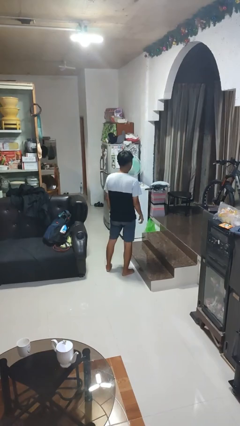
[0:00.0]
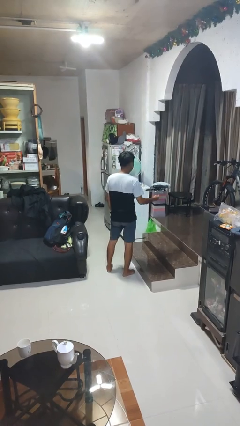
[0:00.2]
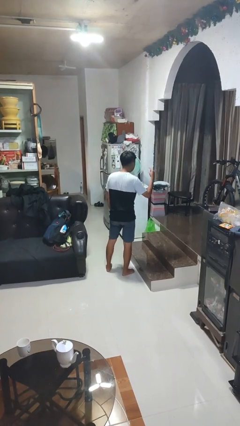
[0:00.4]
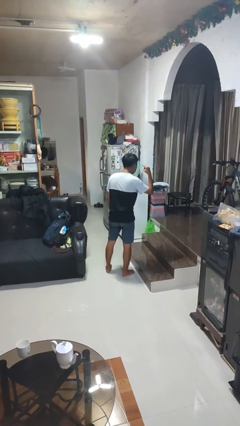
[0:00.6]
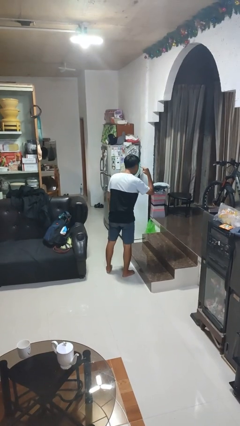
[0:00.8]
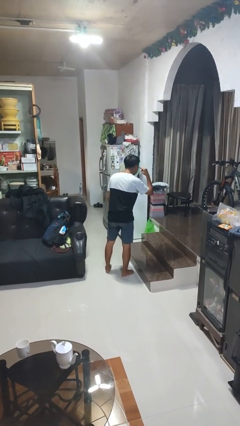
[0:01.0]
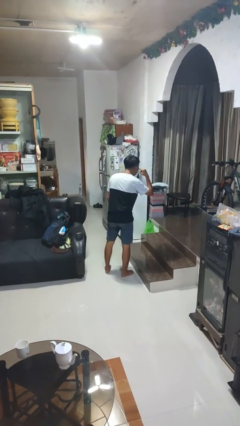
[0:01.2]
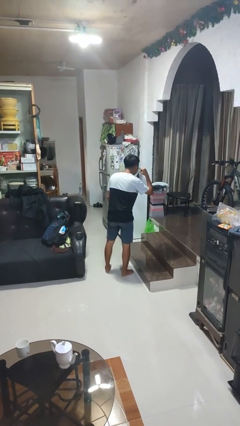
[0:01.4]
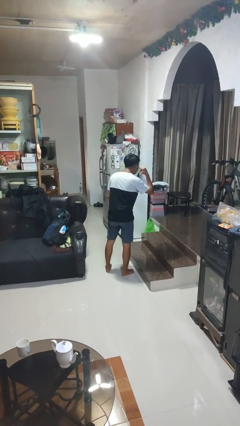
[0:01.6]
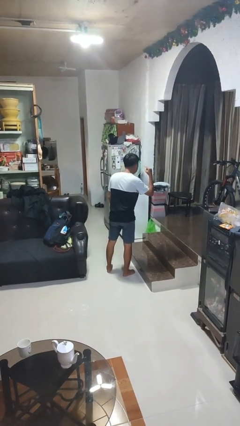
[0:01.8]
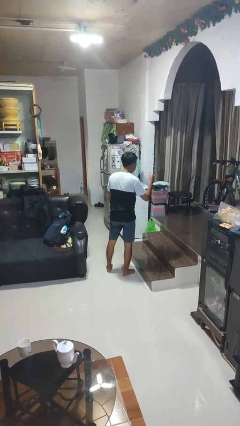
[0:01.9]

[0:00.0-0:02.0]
person gestures listen closely

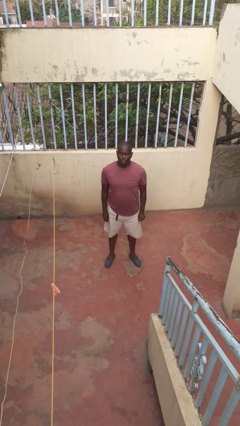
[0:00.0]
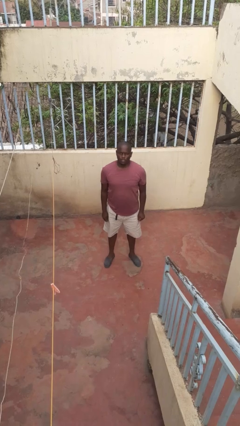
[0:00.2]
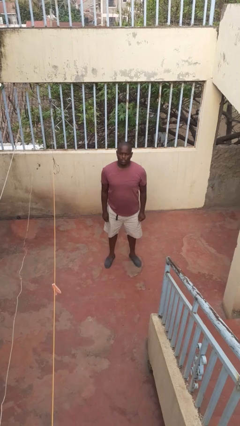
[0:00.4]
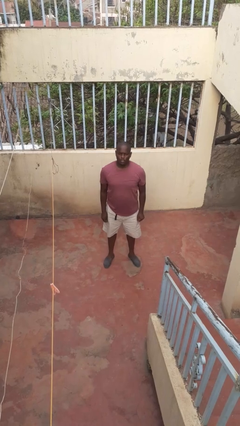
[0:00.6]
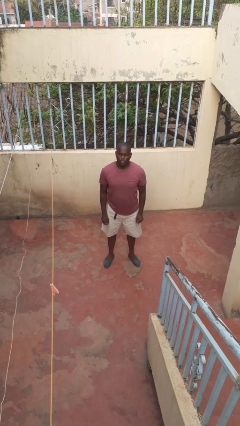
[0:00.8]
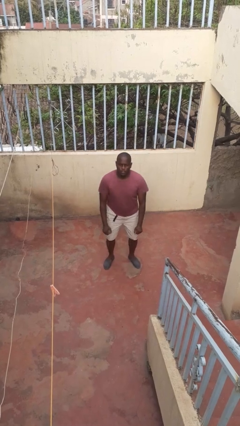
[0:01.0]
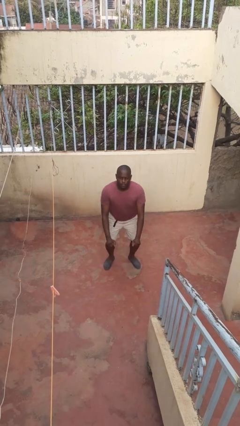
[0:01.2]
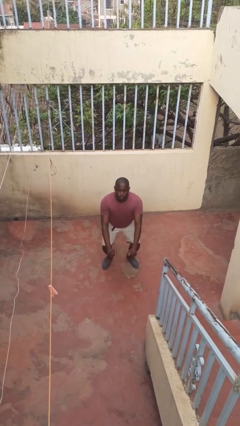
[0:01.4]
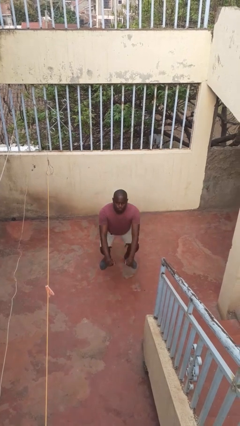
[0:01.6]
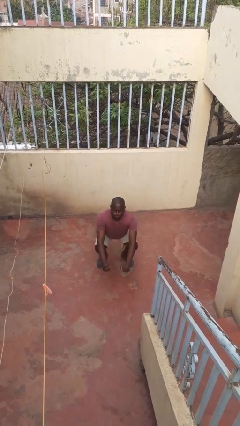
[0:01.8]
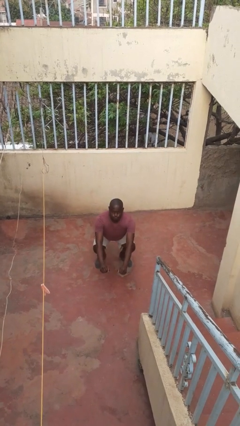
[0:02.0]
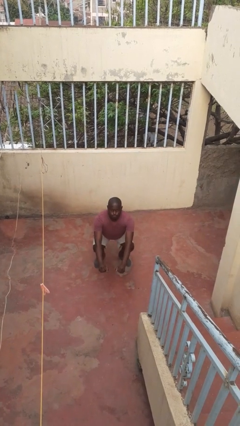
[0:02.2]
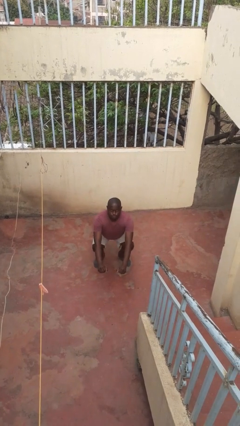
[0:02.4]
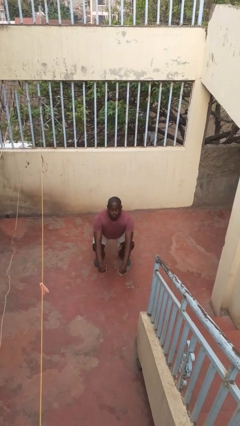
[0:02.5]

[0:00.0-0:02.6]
person squats

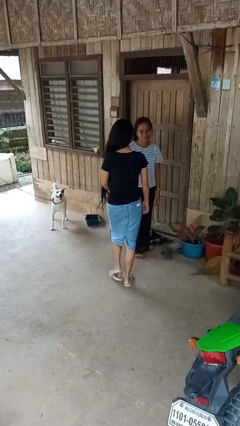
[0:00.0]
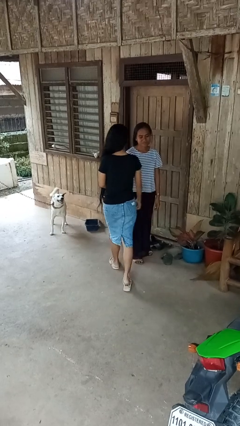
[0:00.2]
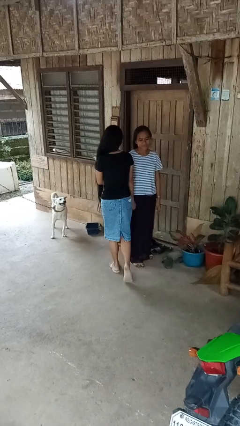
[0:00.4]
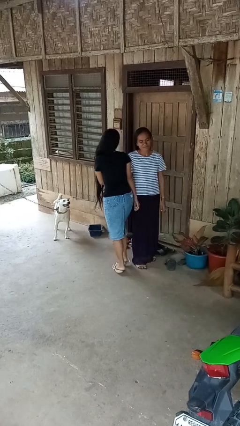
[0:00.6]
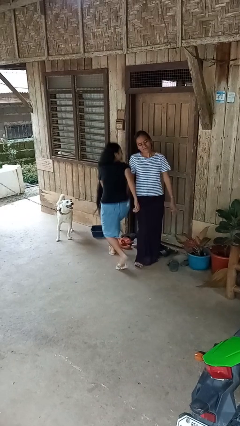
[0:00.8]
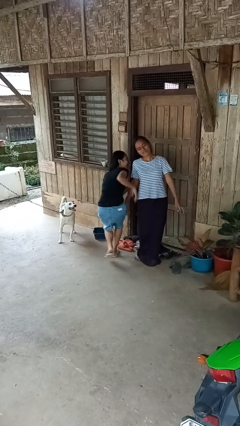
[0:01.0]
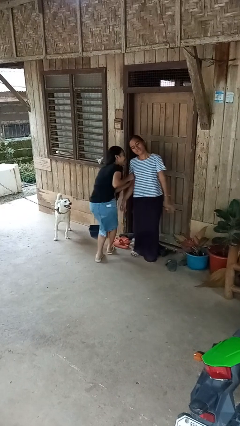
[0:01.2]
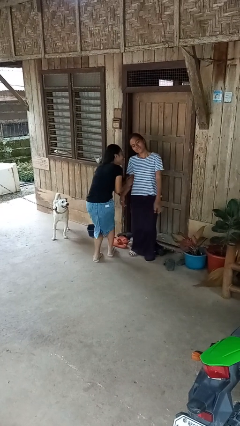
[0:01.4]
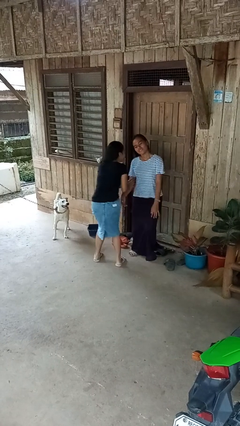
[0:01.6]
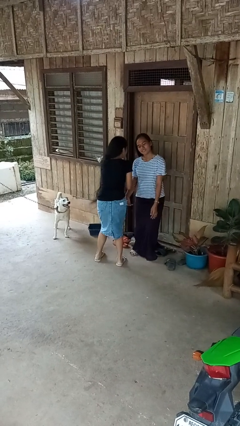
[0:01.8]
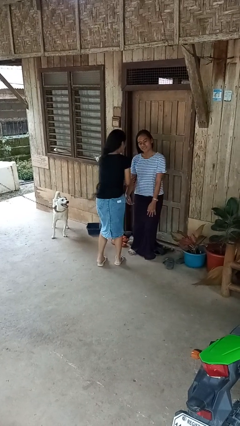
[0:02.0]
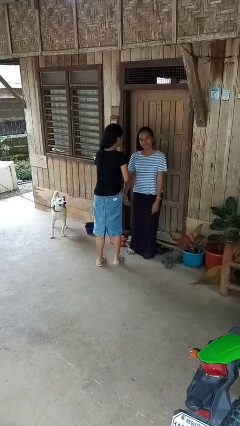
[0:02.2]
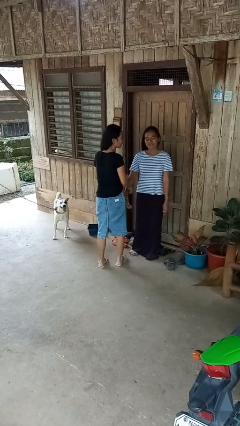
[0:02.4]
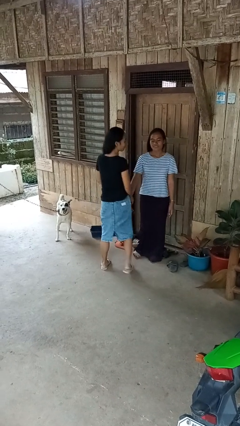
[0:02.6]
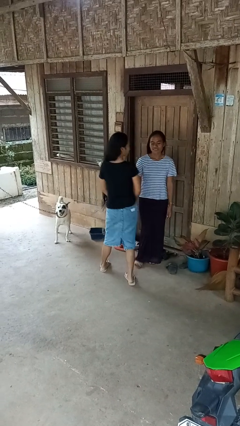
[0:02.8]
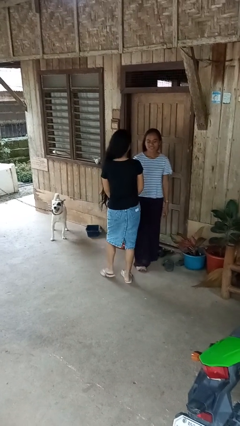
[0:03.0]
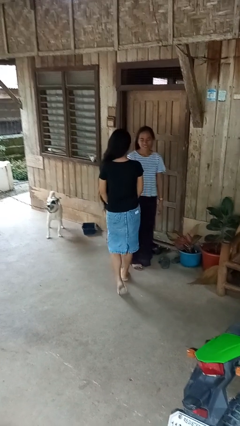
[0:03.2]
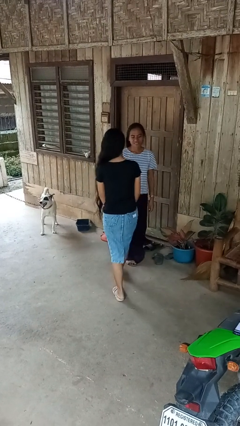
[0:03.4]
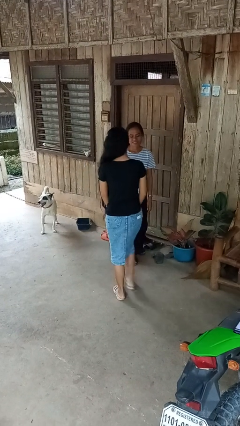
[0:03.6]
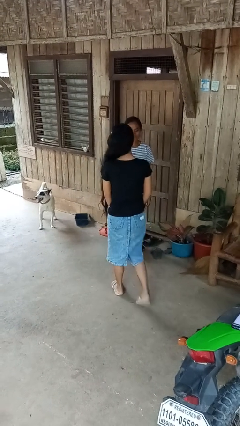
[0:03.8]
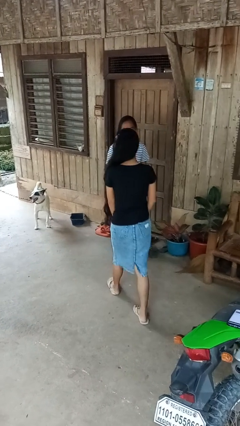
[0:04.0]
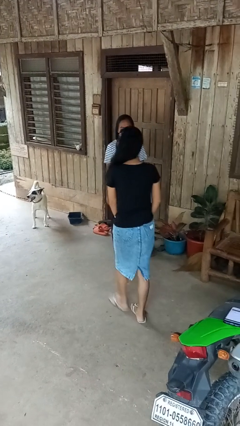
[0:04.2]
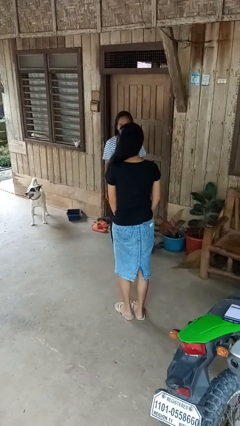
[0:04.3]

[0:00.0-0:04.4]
person bumps into person

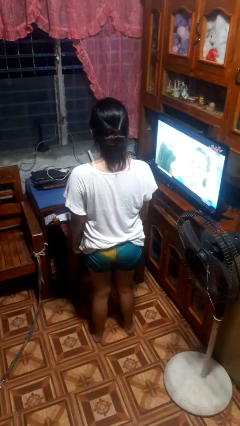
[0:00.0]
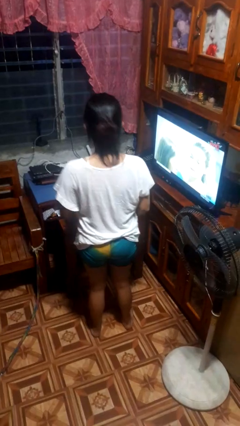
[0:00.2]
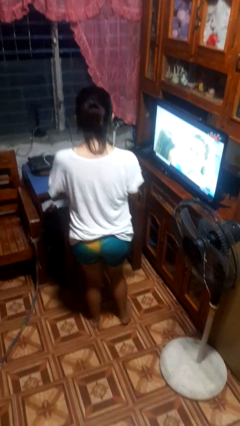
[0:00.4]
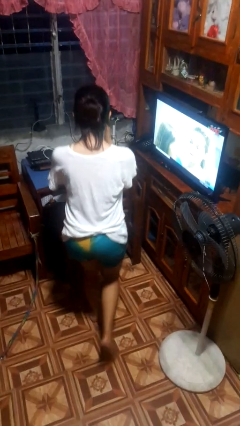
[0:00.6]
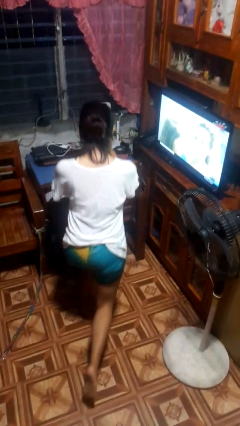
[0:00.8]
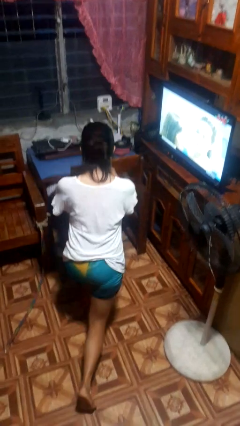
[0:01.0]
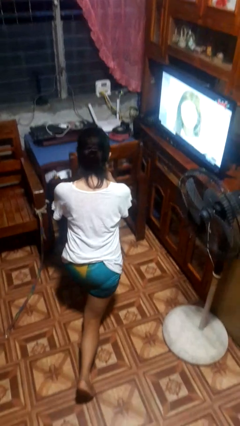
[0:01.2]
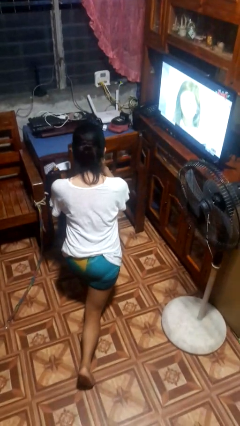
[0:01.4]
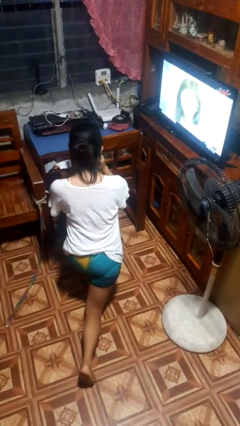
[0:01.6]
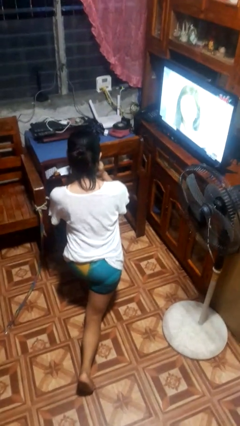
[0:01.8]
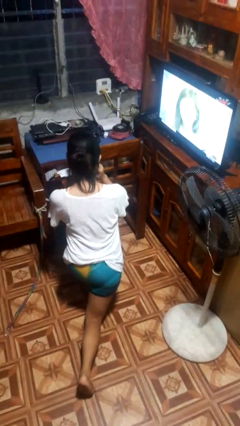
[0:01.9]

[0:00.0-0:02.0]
person exercises with lunges

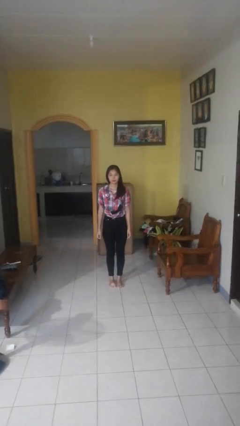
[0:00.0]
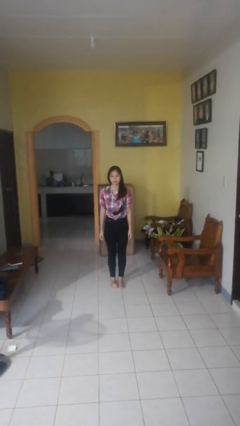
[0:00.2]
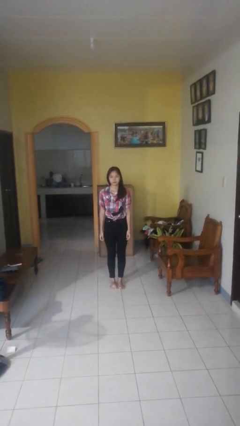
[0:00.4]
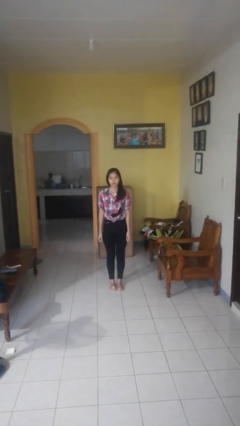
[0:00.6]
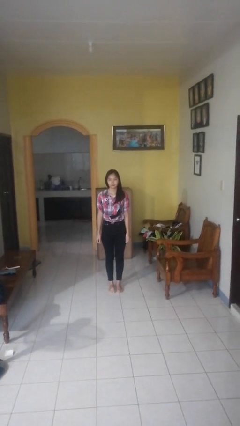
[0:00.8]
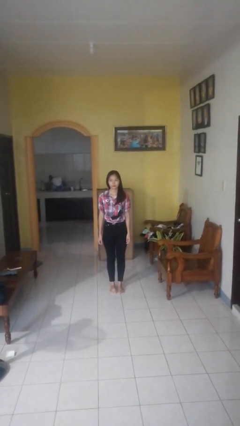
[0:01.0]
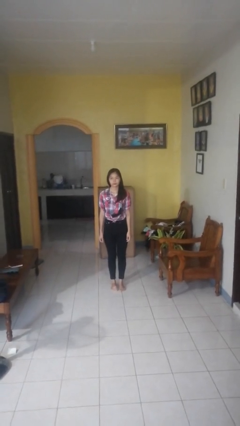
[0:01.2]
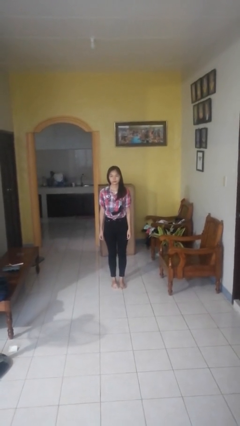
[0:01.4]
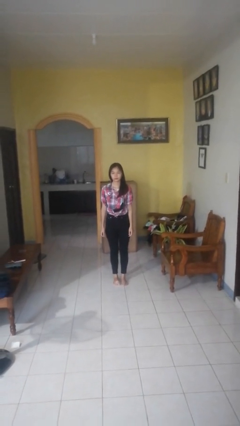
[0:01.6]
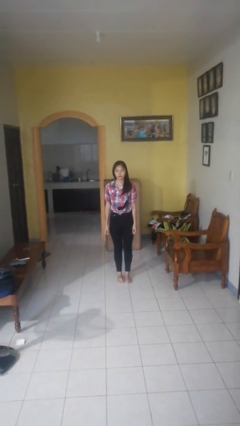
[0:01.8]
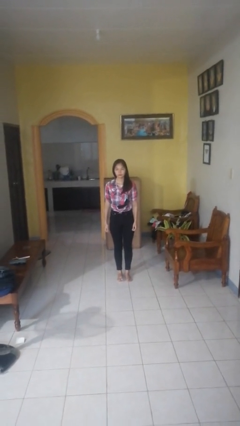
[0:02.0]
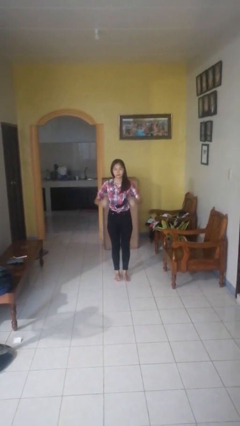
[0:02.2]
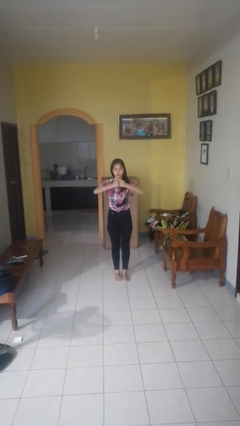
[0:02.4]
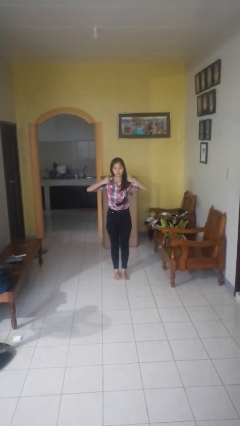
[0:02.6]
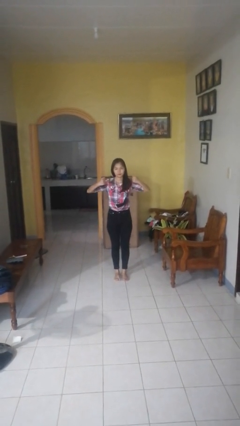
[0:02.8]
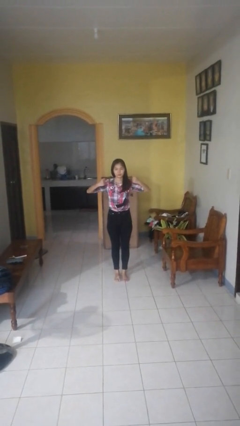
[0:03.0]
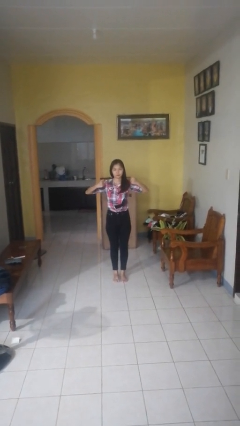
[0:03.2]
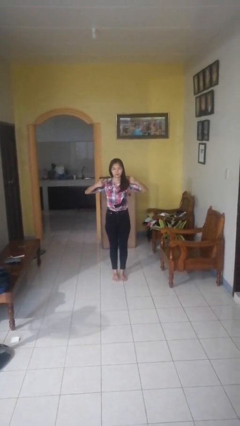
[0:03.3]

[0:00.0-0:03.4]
person gestures zoom in

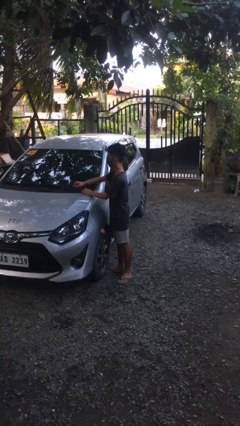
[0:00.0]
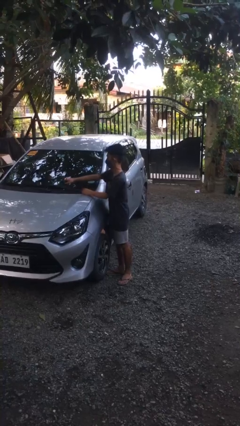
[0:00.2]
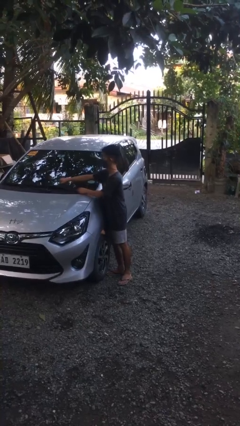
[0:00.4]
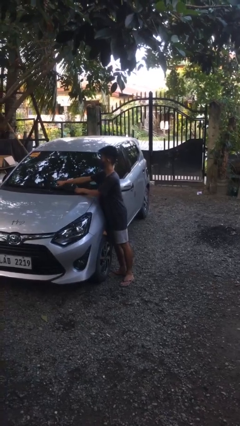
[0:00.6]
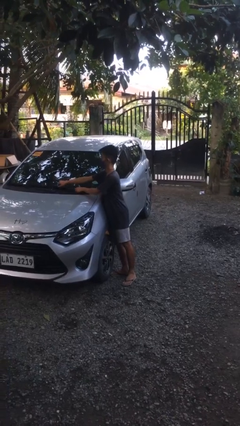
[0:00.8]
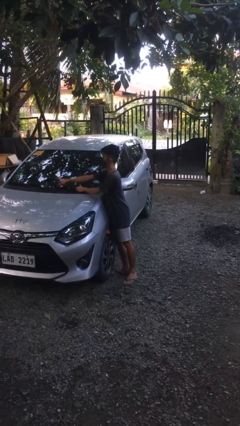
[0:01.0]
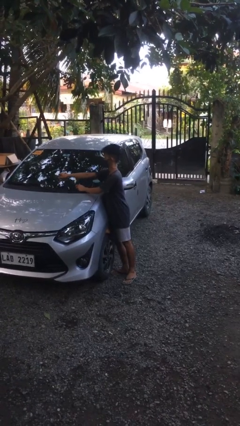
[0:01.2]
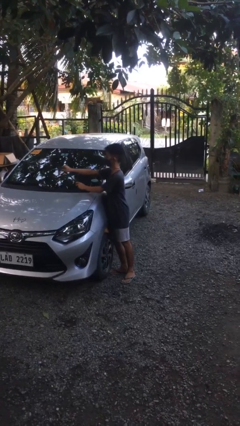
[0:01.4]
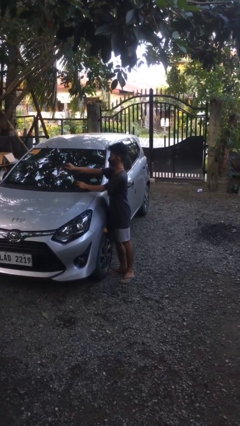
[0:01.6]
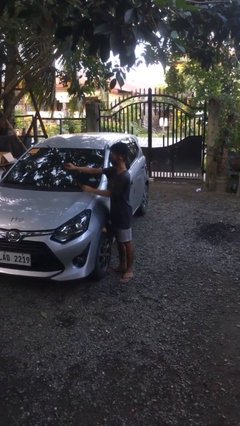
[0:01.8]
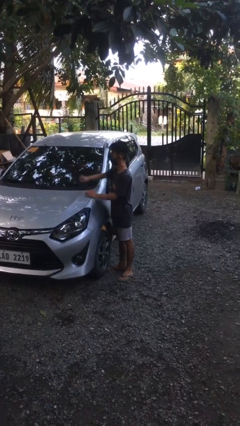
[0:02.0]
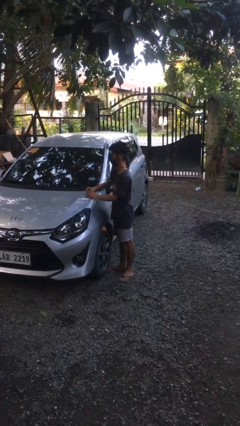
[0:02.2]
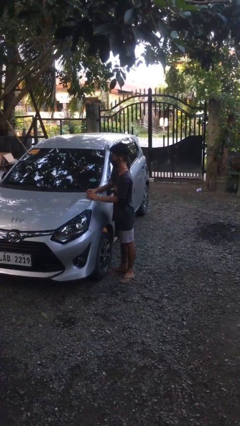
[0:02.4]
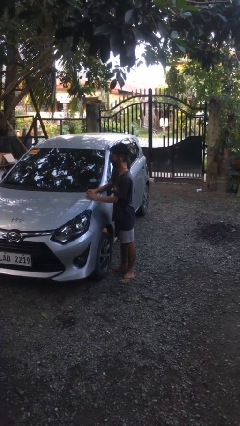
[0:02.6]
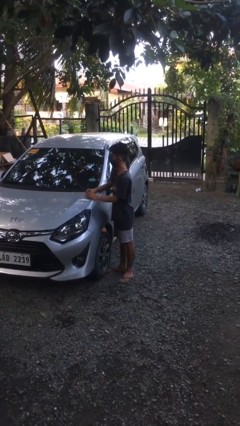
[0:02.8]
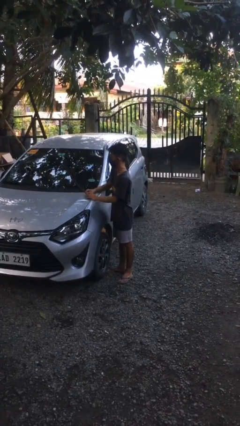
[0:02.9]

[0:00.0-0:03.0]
person flips up car wipers
